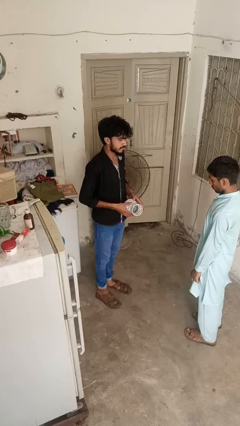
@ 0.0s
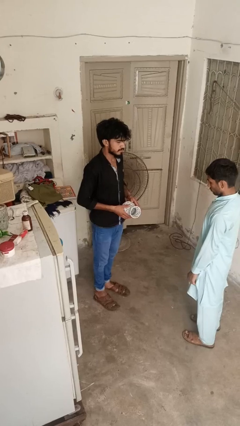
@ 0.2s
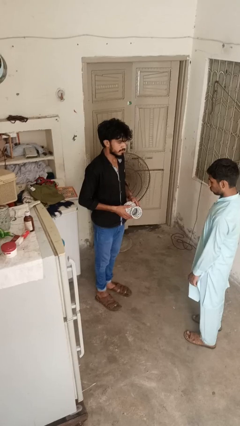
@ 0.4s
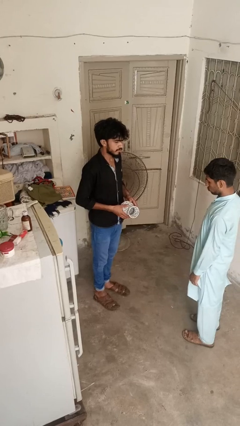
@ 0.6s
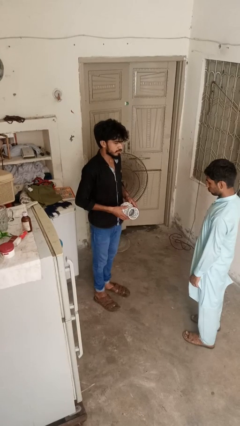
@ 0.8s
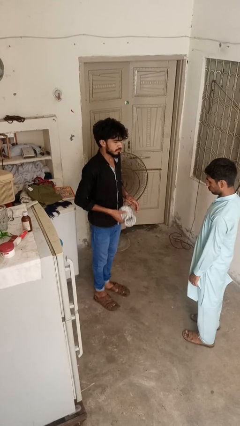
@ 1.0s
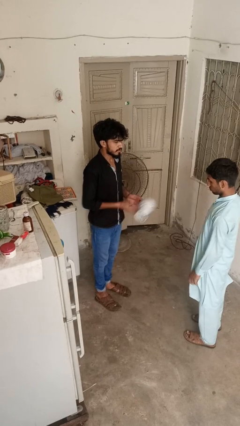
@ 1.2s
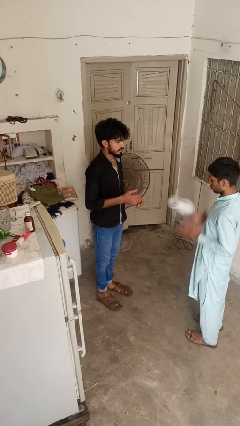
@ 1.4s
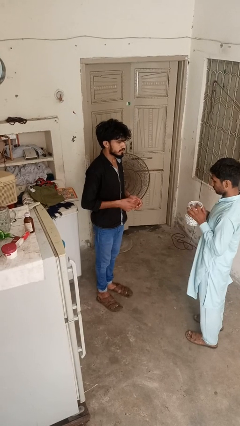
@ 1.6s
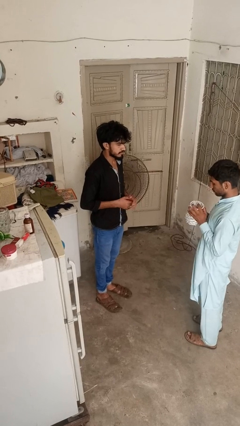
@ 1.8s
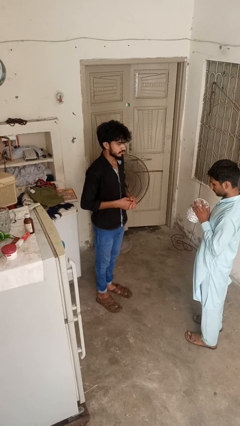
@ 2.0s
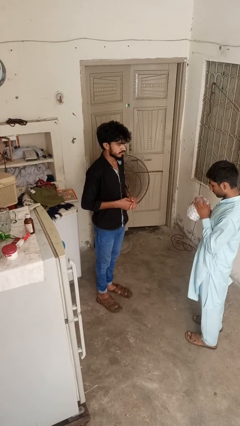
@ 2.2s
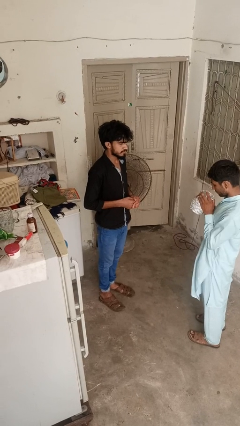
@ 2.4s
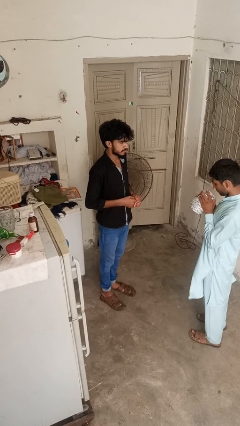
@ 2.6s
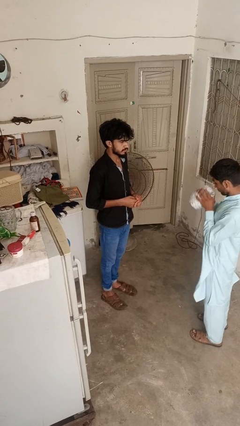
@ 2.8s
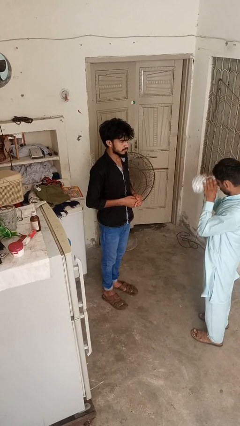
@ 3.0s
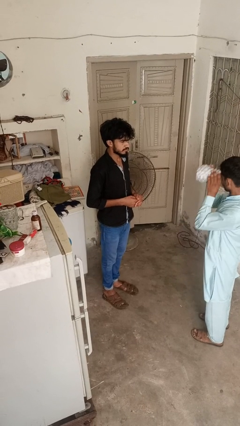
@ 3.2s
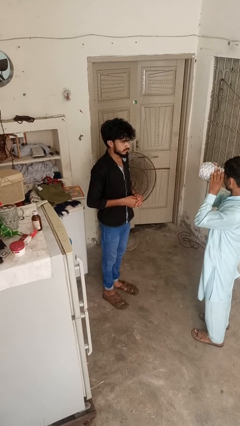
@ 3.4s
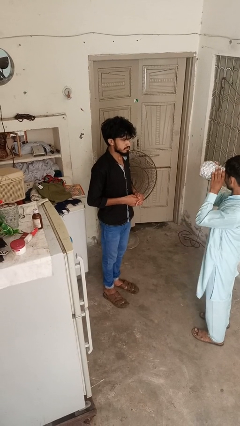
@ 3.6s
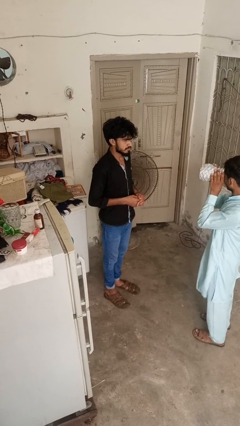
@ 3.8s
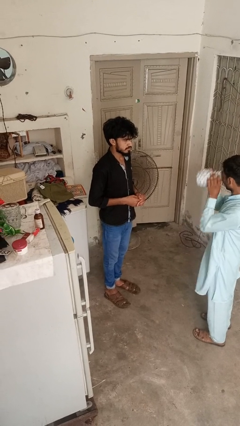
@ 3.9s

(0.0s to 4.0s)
person throws object to person

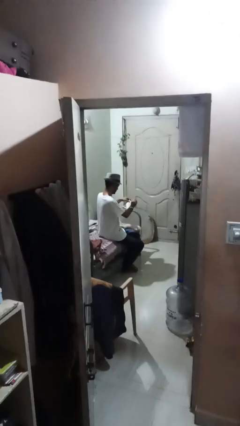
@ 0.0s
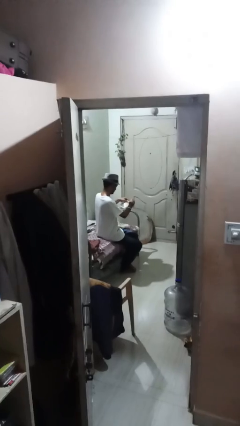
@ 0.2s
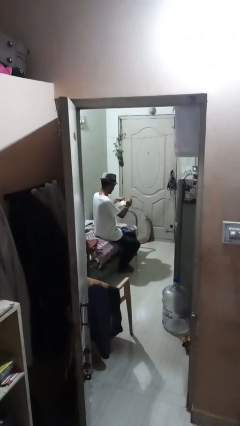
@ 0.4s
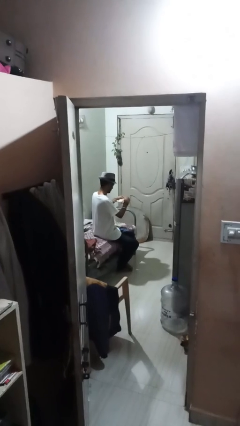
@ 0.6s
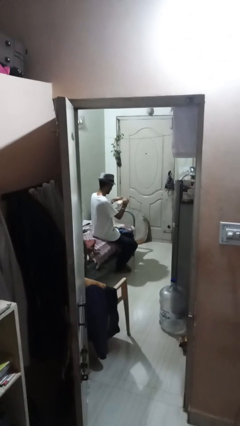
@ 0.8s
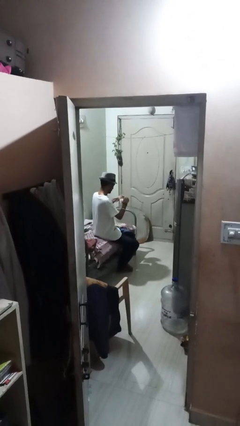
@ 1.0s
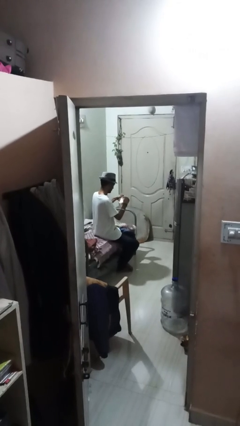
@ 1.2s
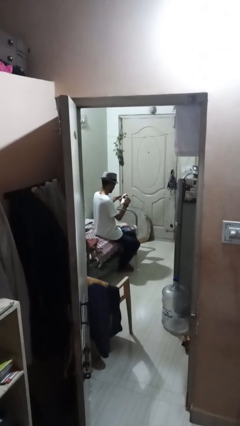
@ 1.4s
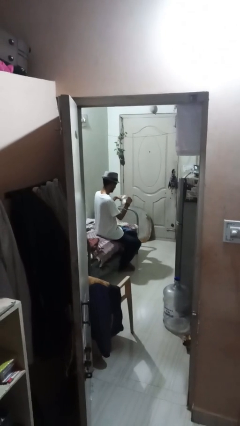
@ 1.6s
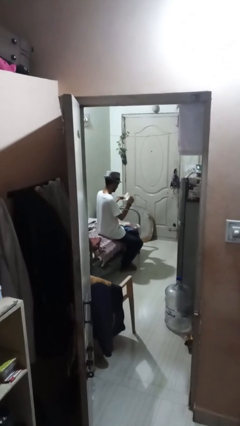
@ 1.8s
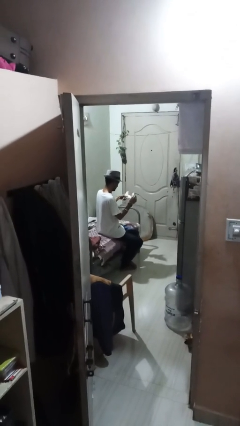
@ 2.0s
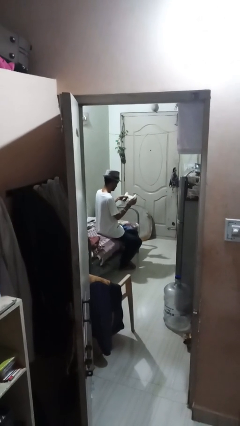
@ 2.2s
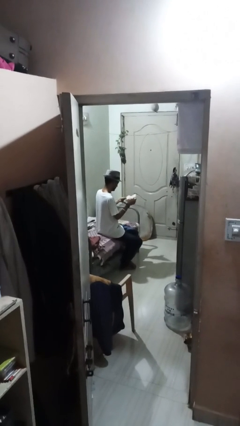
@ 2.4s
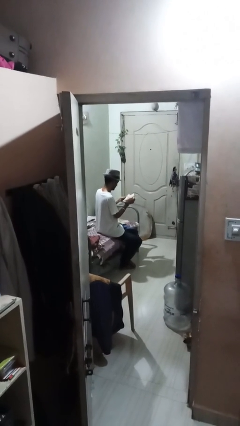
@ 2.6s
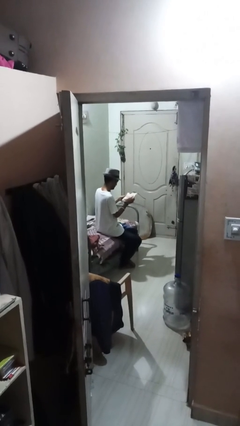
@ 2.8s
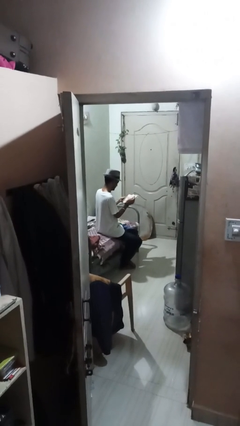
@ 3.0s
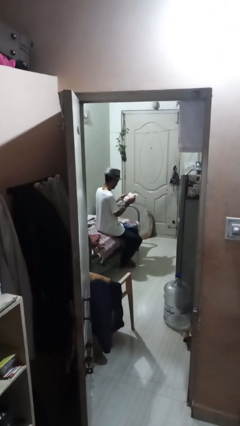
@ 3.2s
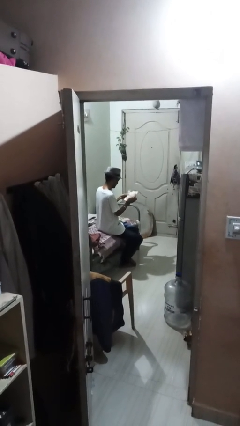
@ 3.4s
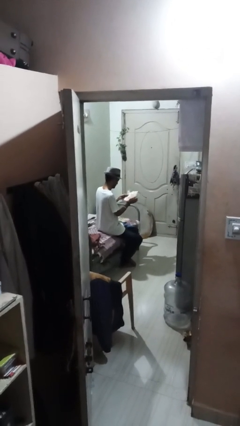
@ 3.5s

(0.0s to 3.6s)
person tears paper

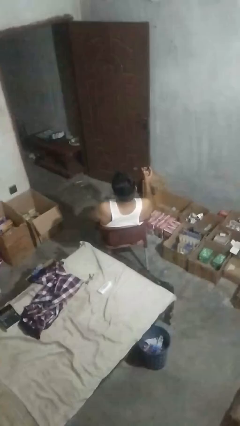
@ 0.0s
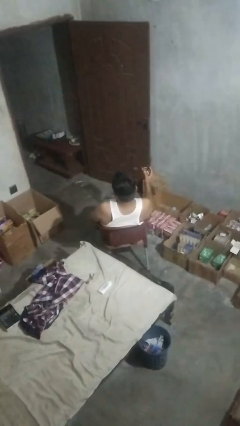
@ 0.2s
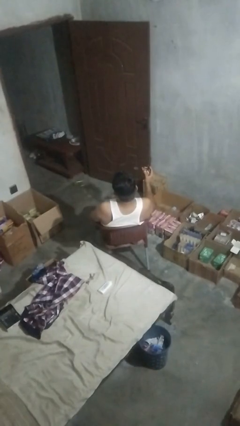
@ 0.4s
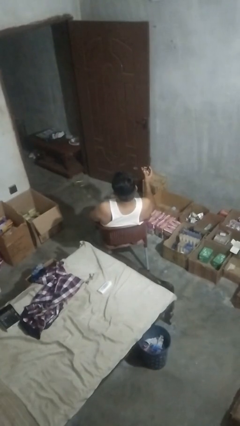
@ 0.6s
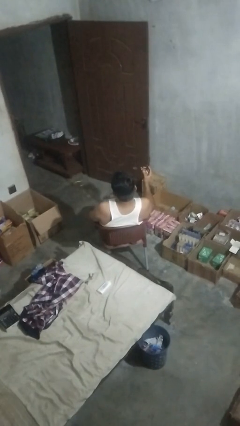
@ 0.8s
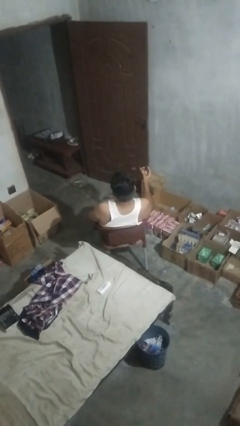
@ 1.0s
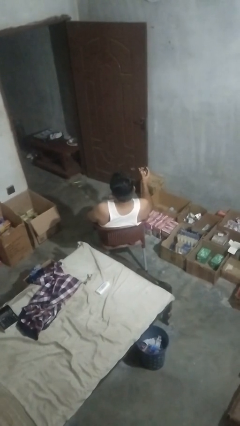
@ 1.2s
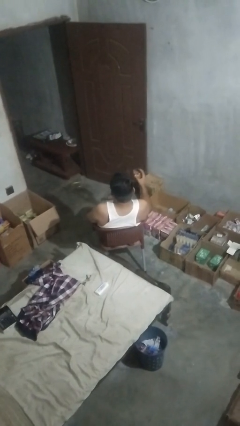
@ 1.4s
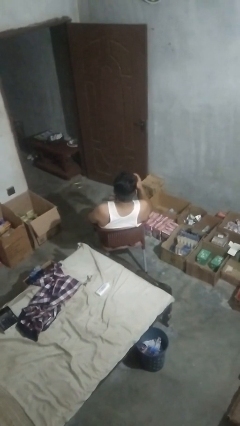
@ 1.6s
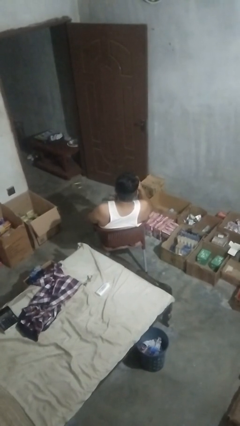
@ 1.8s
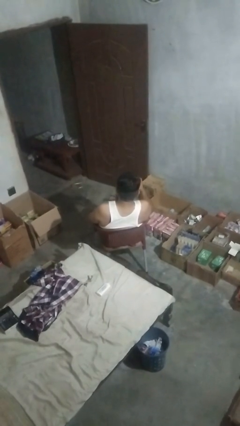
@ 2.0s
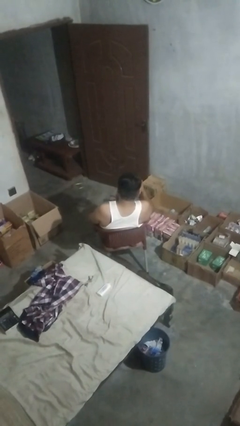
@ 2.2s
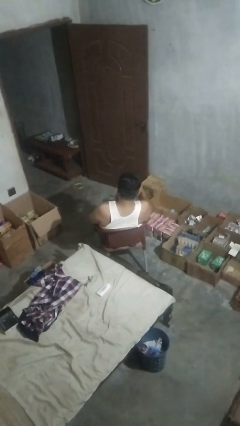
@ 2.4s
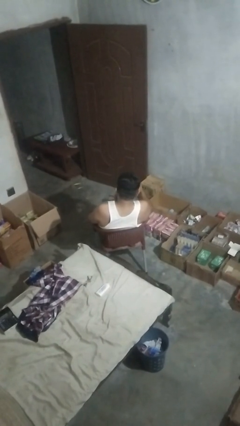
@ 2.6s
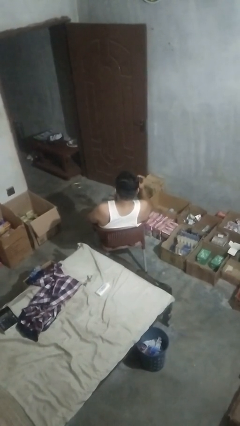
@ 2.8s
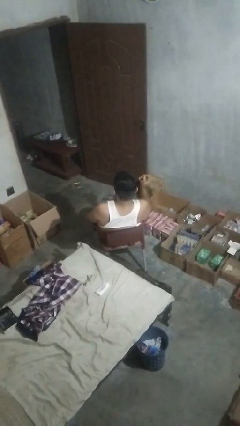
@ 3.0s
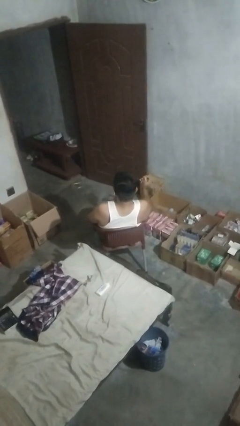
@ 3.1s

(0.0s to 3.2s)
person puts on sunglasses

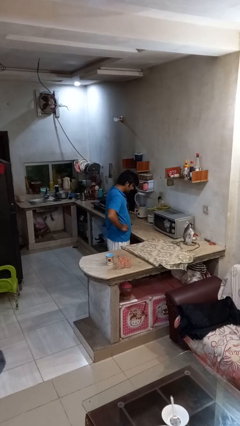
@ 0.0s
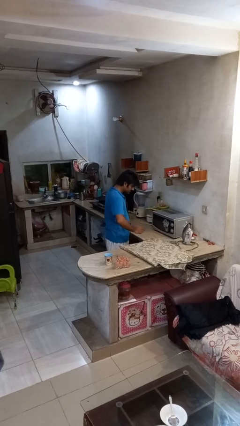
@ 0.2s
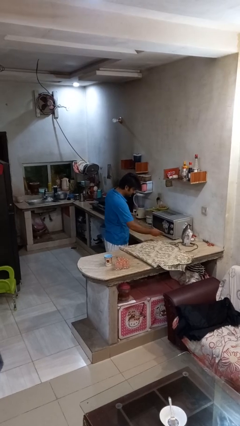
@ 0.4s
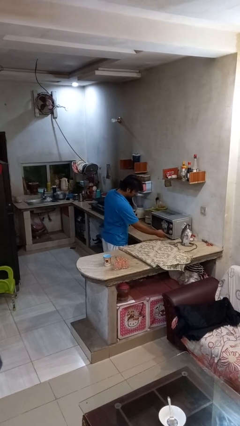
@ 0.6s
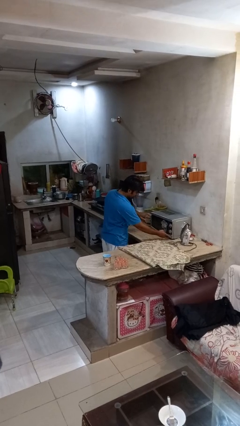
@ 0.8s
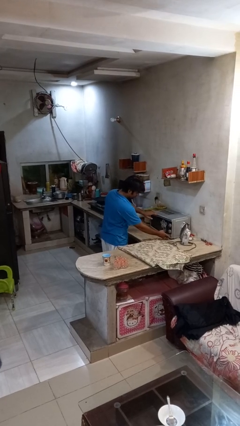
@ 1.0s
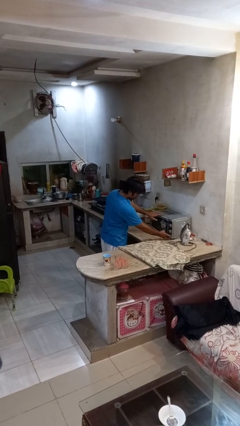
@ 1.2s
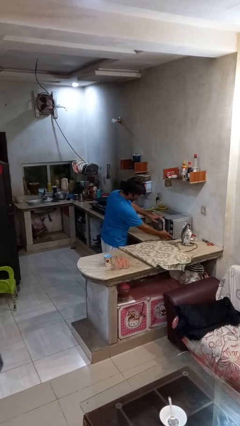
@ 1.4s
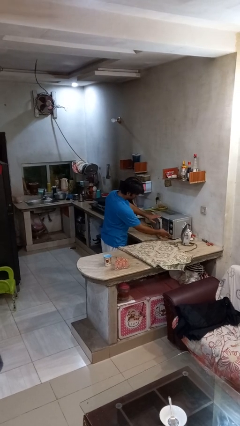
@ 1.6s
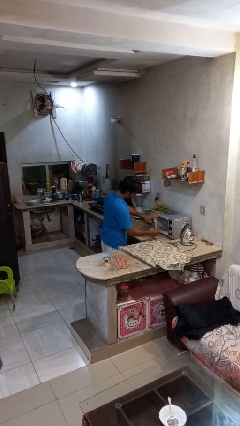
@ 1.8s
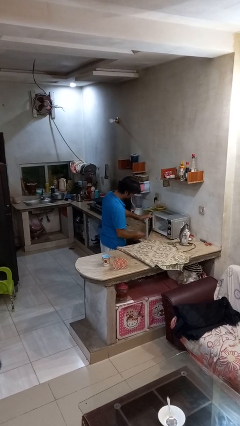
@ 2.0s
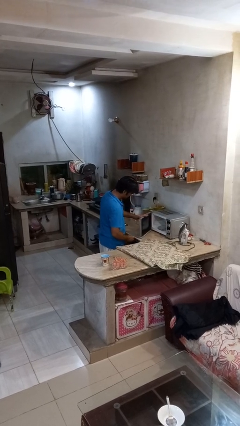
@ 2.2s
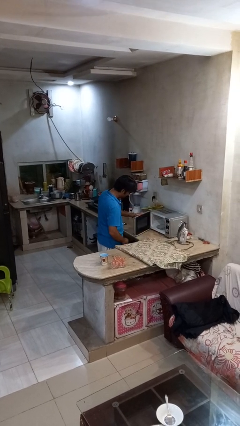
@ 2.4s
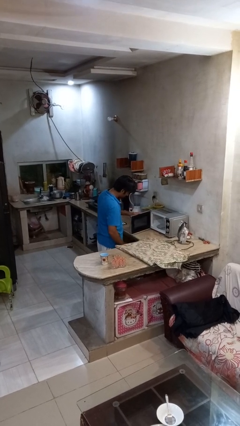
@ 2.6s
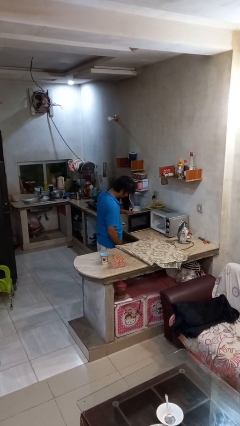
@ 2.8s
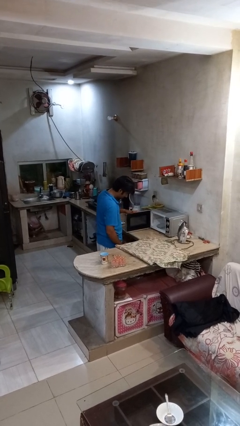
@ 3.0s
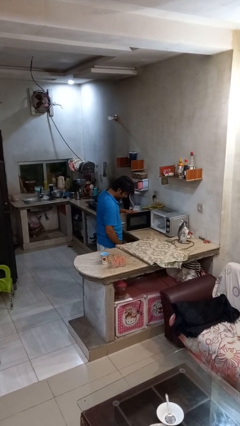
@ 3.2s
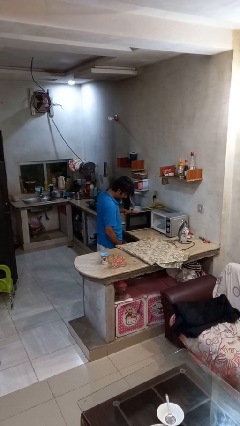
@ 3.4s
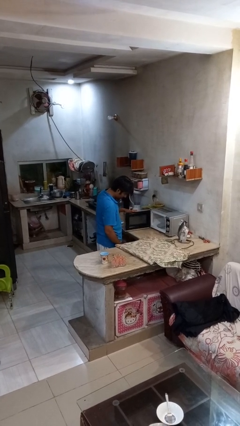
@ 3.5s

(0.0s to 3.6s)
person opens microwave

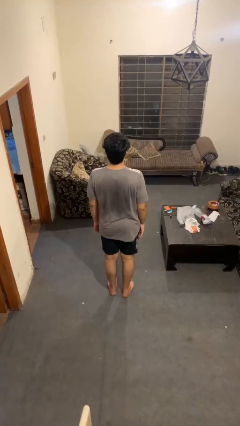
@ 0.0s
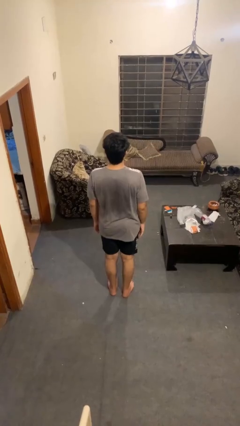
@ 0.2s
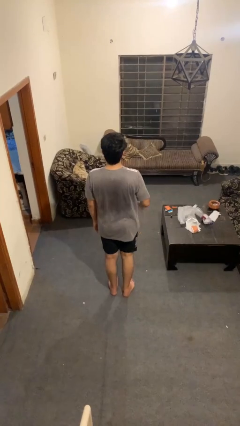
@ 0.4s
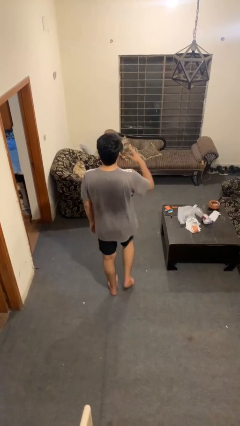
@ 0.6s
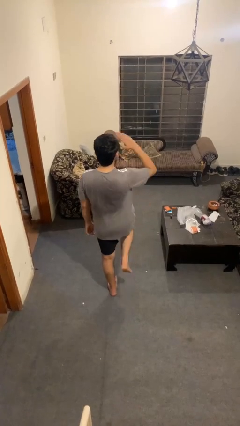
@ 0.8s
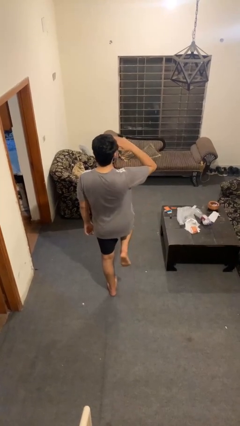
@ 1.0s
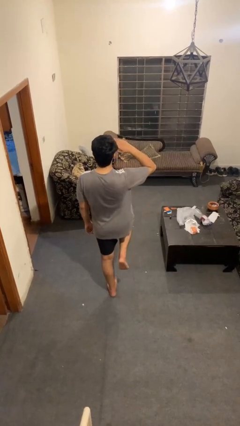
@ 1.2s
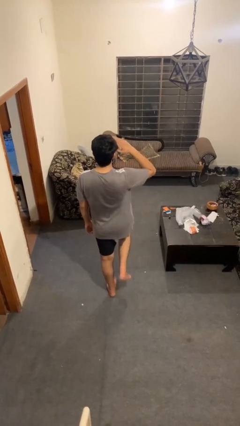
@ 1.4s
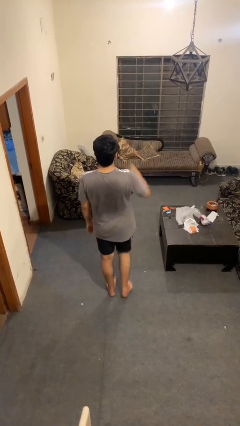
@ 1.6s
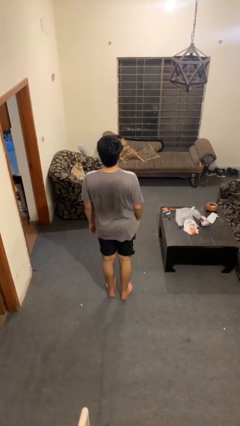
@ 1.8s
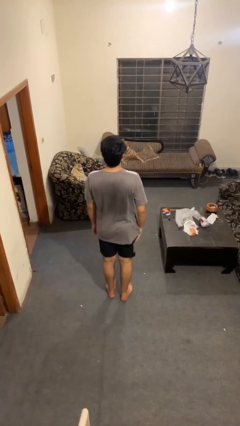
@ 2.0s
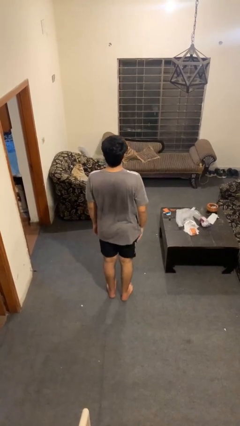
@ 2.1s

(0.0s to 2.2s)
person salutes

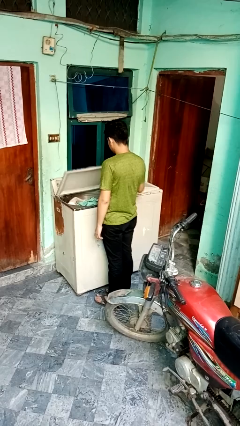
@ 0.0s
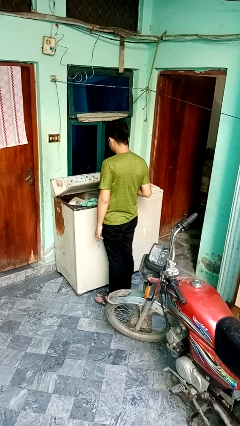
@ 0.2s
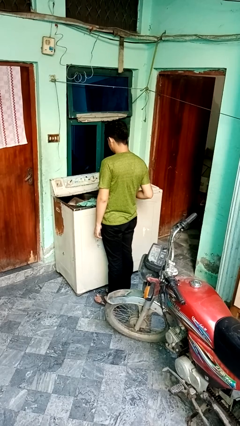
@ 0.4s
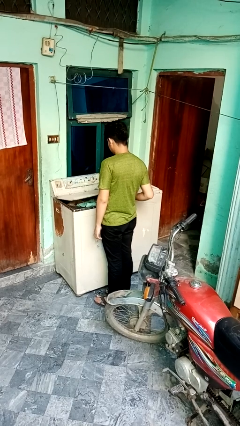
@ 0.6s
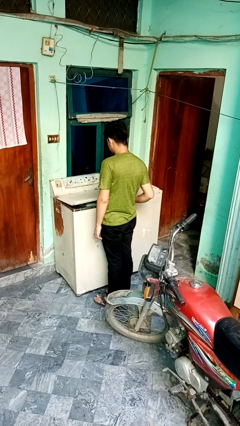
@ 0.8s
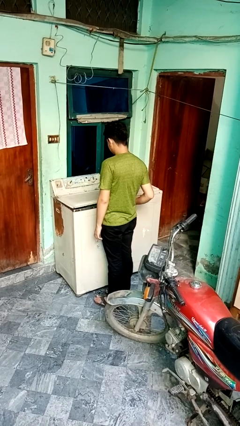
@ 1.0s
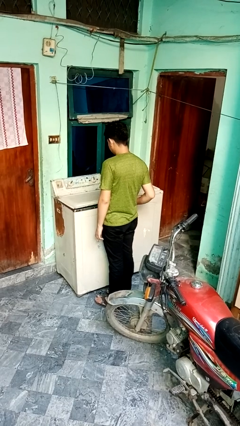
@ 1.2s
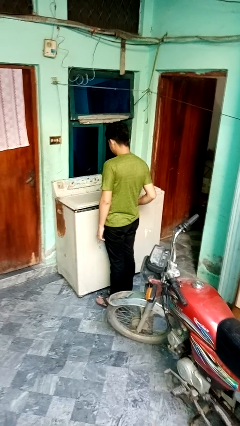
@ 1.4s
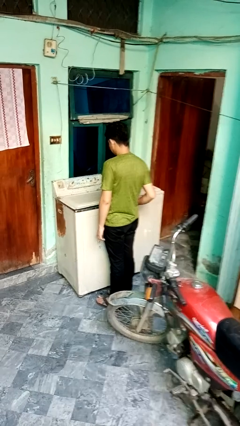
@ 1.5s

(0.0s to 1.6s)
person closes clothes washer
